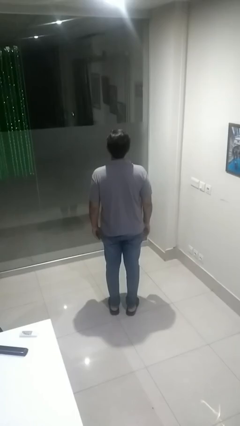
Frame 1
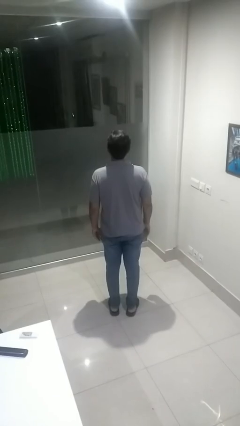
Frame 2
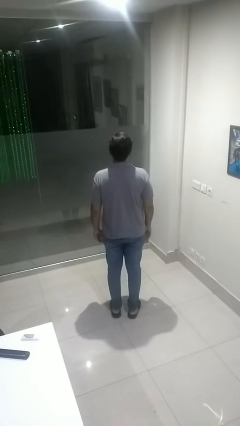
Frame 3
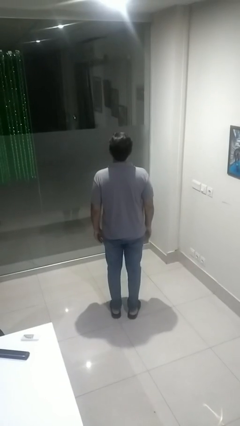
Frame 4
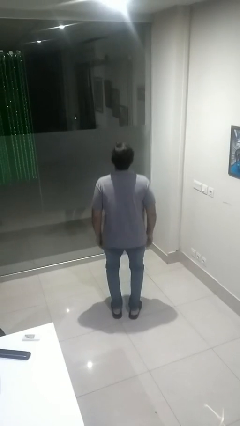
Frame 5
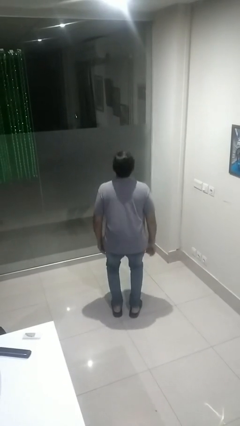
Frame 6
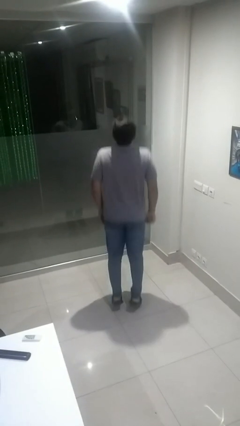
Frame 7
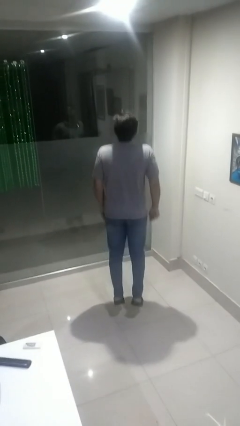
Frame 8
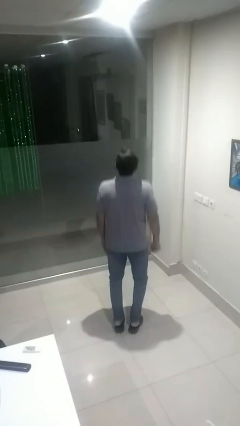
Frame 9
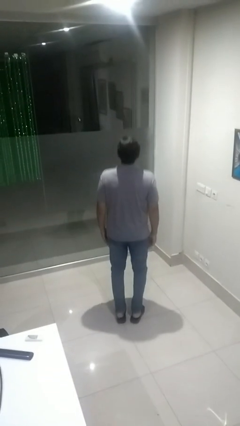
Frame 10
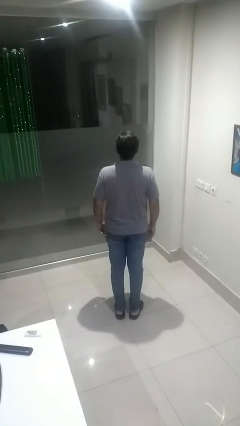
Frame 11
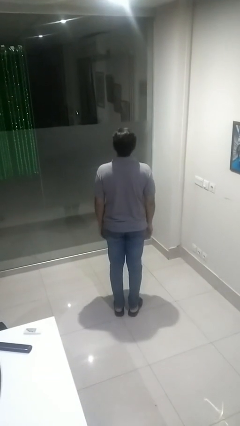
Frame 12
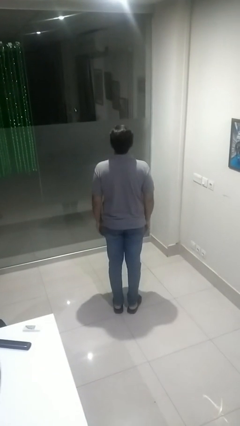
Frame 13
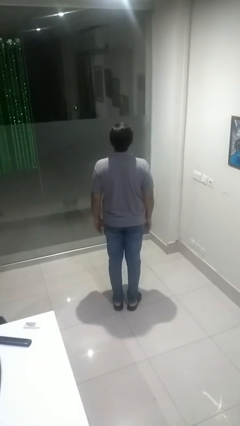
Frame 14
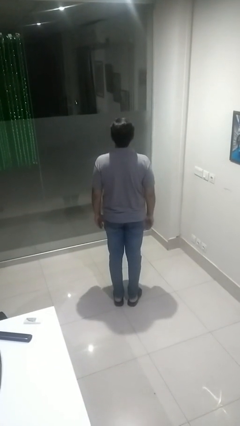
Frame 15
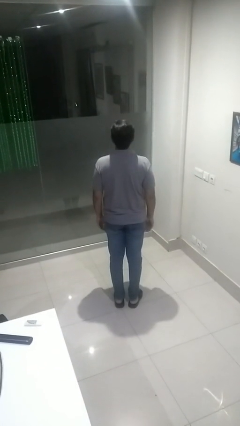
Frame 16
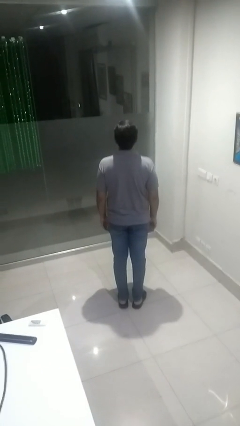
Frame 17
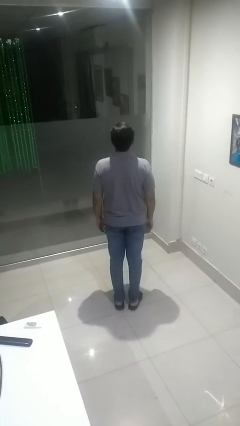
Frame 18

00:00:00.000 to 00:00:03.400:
person jumps

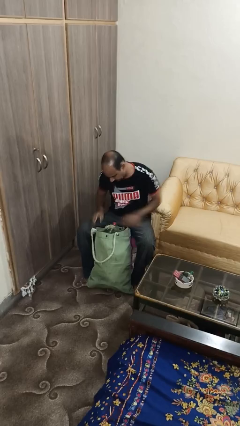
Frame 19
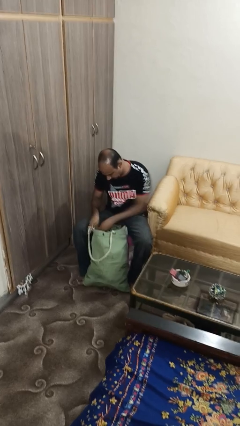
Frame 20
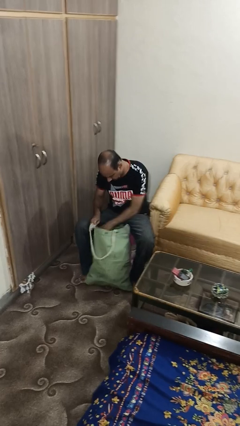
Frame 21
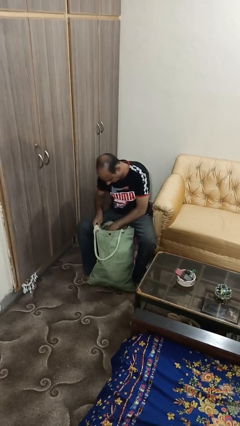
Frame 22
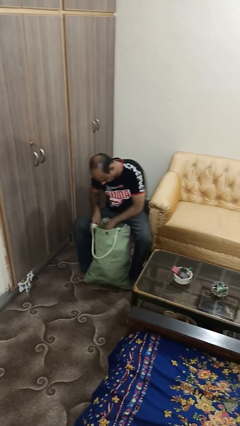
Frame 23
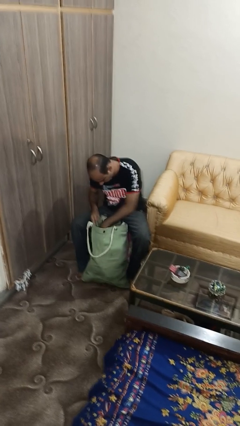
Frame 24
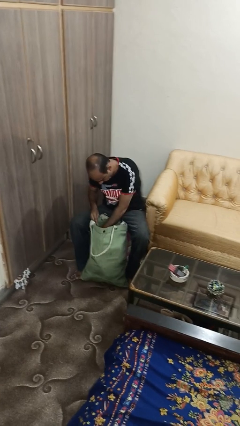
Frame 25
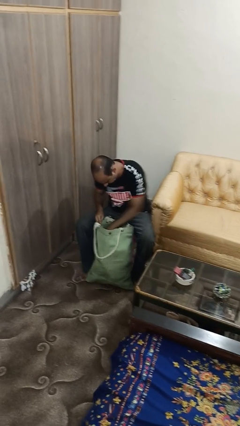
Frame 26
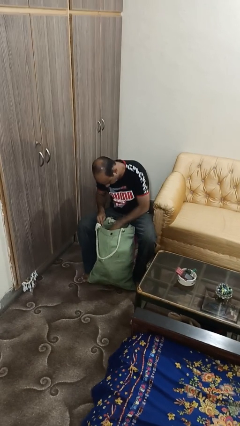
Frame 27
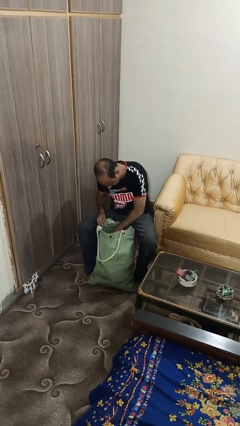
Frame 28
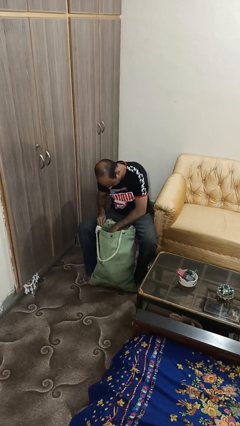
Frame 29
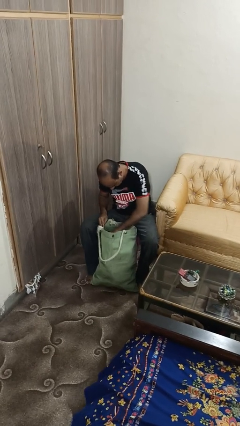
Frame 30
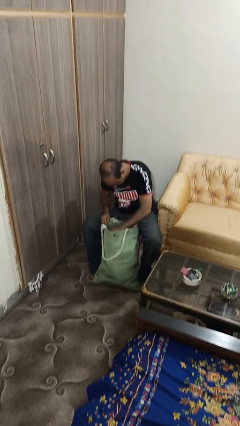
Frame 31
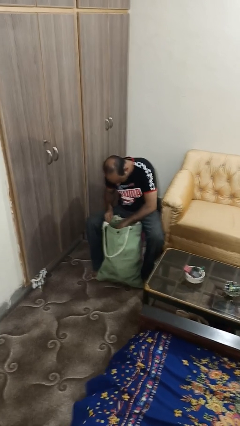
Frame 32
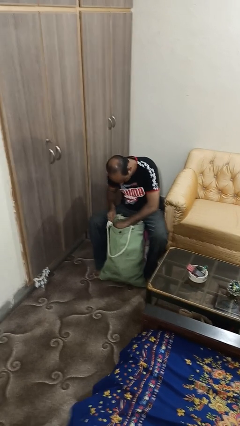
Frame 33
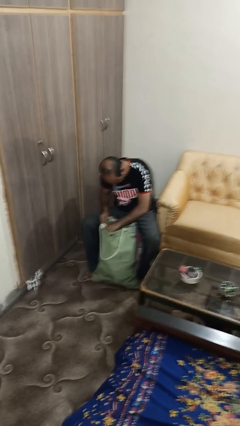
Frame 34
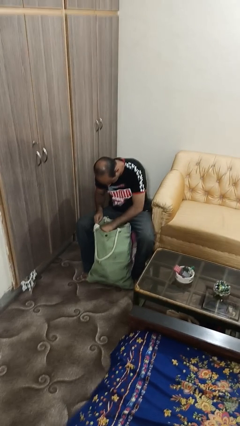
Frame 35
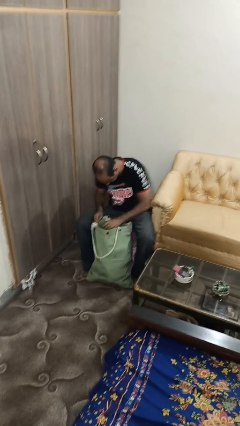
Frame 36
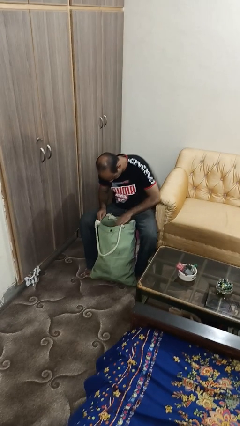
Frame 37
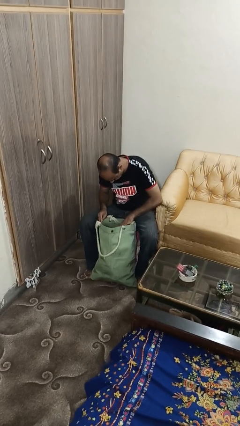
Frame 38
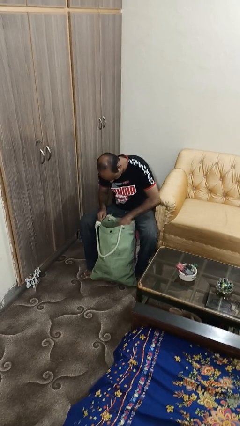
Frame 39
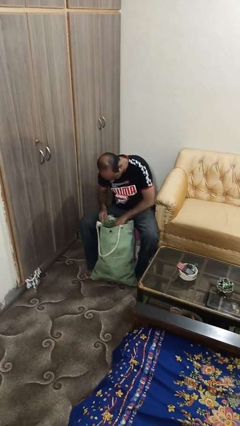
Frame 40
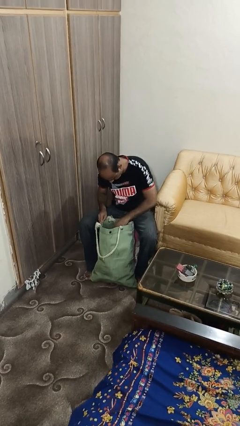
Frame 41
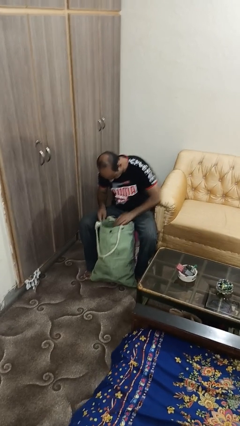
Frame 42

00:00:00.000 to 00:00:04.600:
person searches in bag

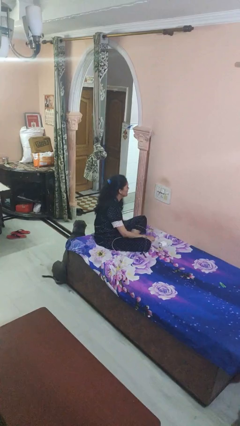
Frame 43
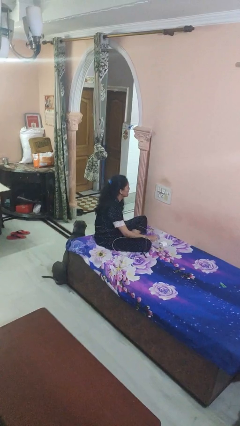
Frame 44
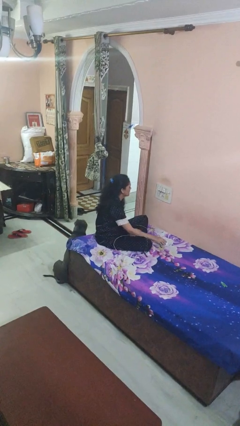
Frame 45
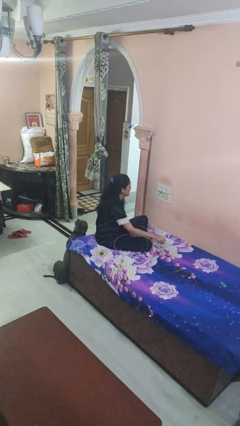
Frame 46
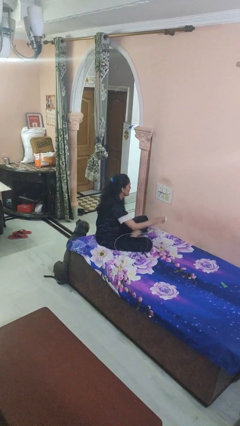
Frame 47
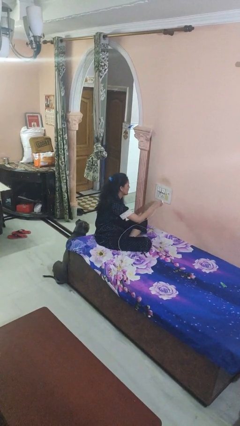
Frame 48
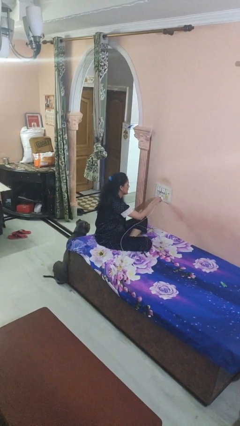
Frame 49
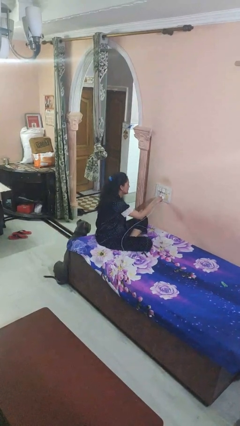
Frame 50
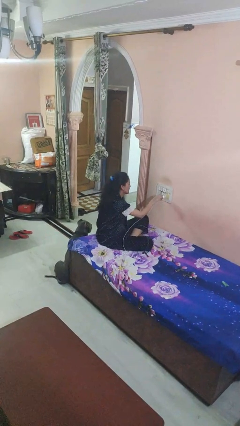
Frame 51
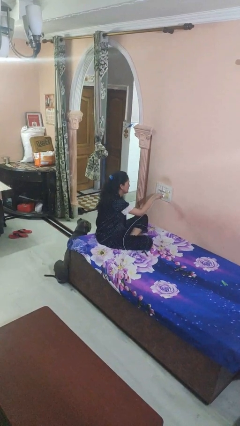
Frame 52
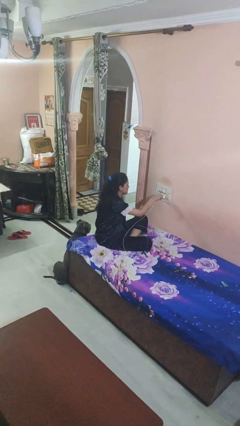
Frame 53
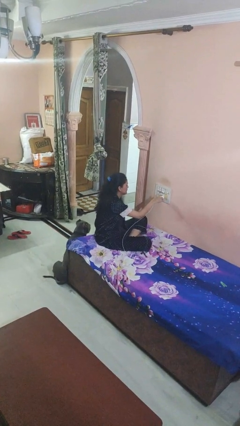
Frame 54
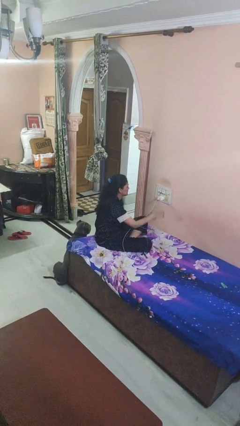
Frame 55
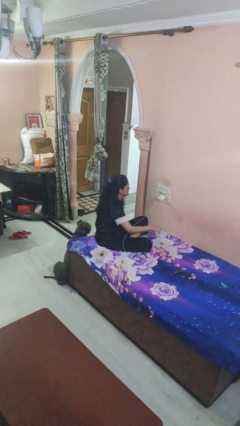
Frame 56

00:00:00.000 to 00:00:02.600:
person plugs into electrical socket

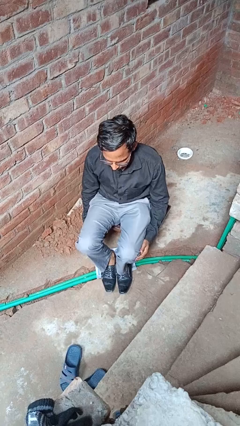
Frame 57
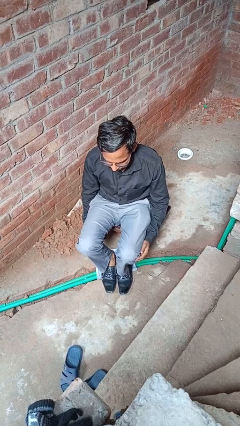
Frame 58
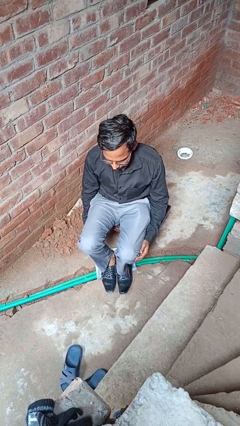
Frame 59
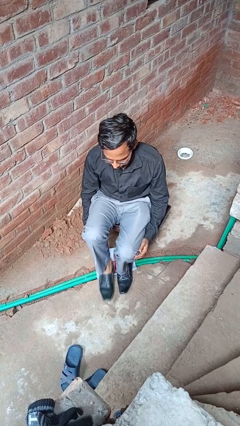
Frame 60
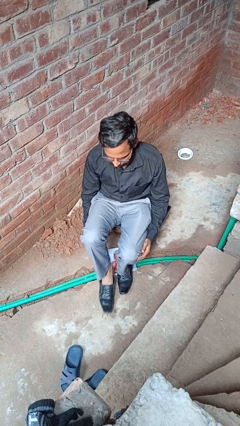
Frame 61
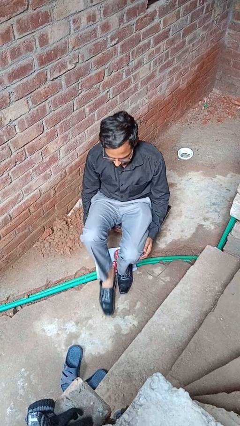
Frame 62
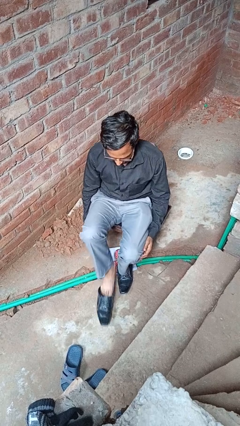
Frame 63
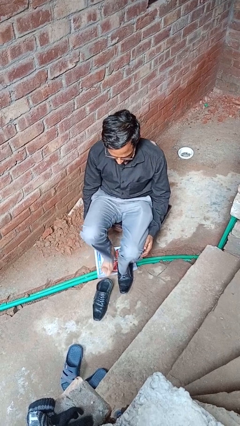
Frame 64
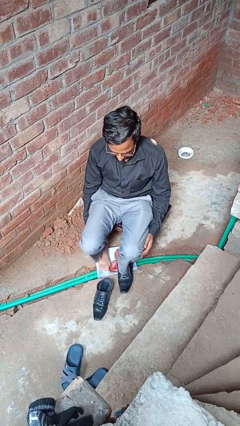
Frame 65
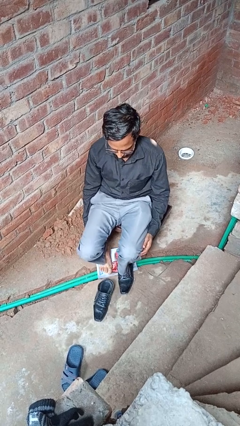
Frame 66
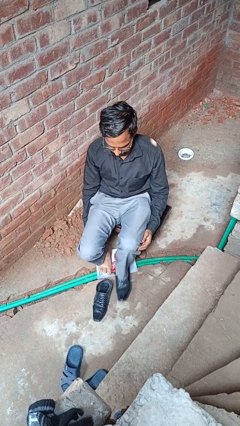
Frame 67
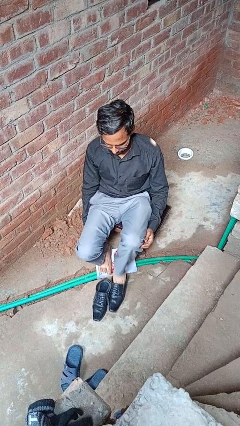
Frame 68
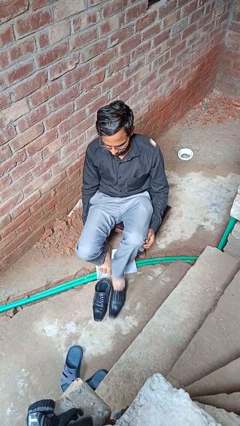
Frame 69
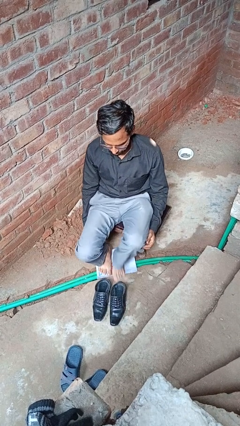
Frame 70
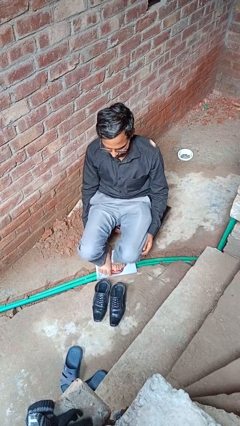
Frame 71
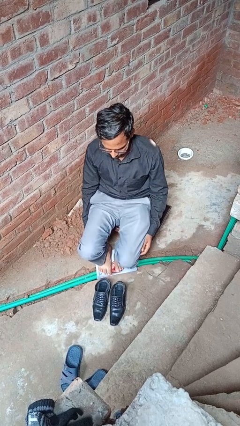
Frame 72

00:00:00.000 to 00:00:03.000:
person takes off shoes

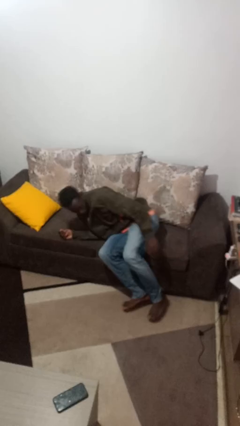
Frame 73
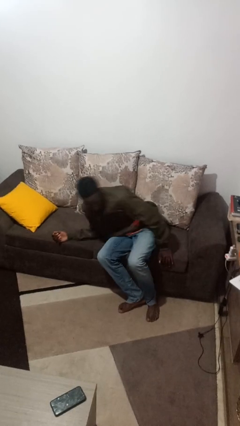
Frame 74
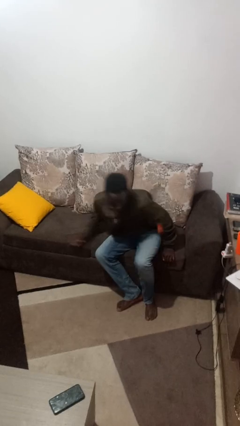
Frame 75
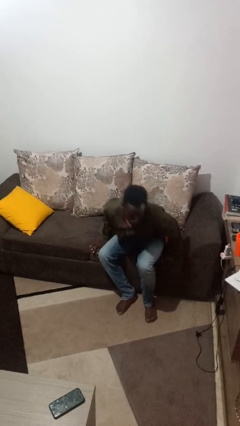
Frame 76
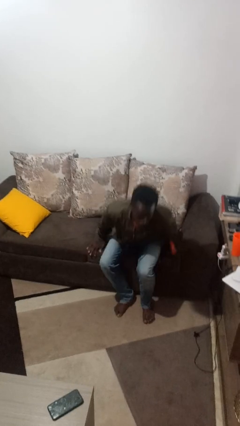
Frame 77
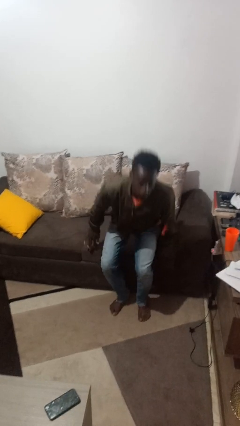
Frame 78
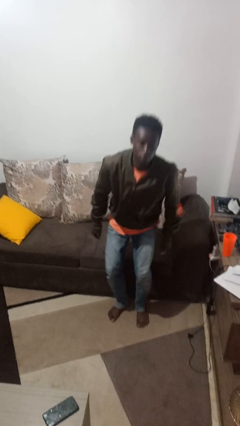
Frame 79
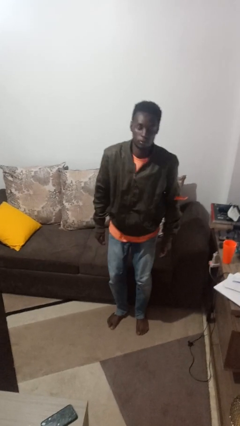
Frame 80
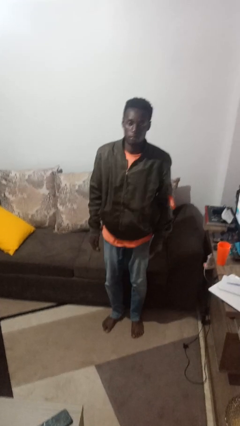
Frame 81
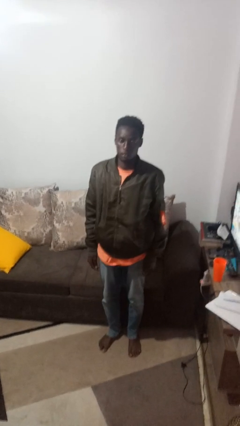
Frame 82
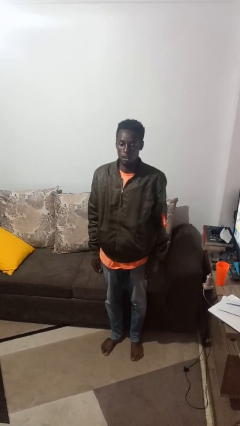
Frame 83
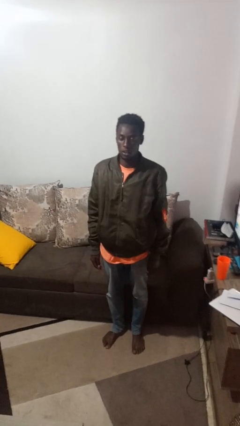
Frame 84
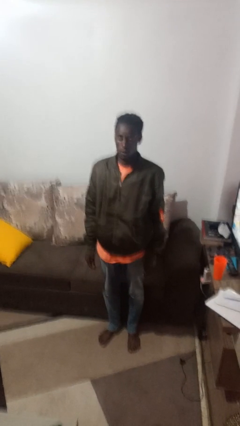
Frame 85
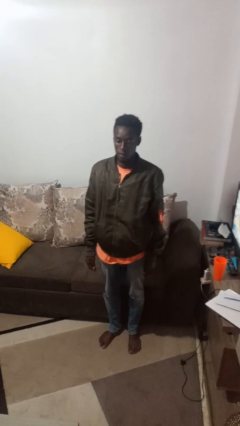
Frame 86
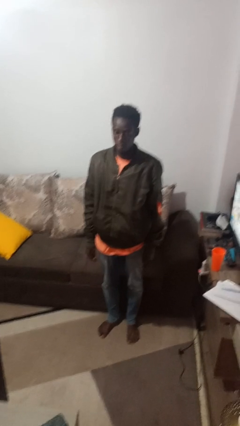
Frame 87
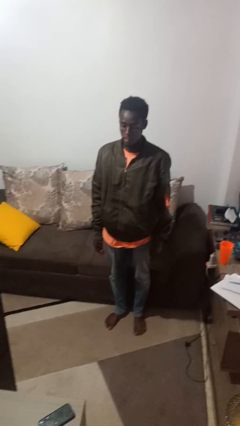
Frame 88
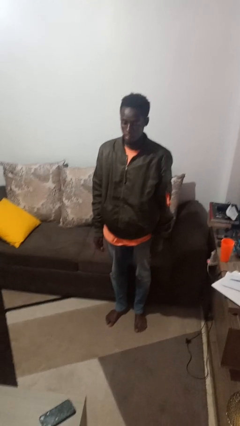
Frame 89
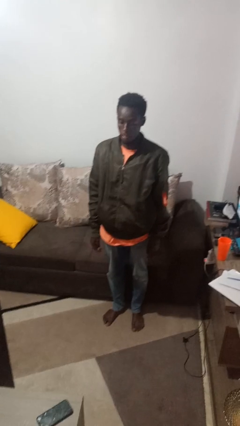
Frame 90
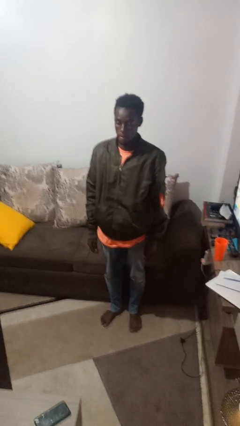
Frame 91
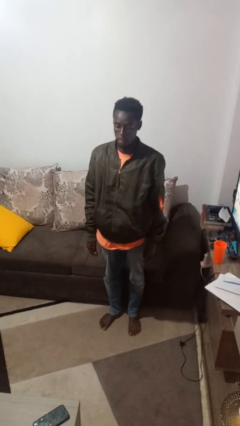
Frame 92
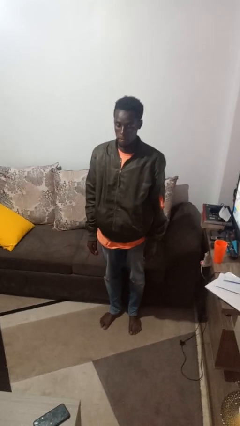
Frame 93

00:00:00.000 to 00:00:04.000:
person stands up

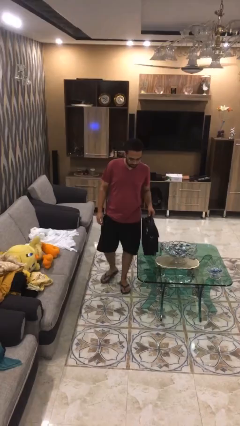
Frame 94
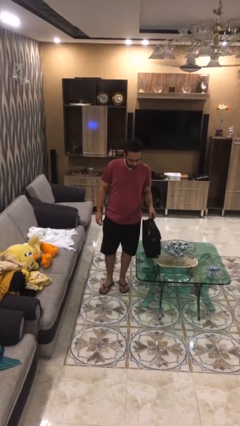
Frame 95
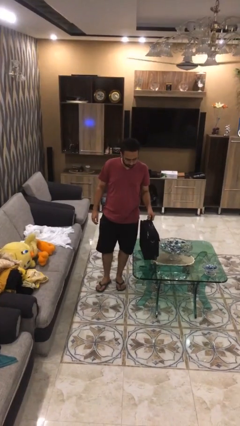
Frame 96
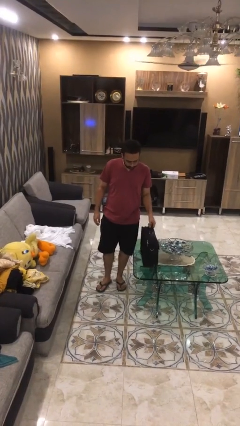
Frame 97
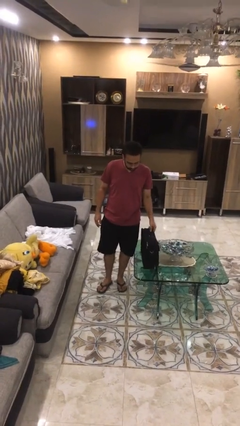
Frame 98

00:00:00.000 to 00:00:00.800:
person puts down object on table
